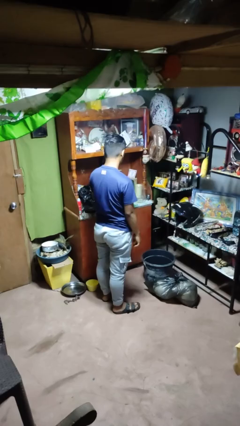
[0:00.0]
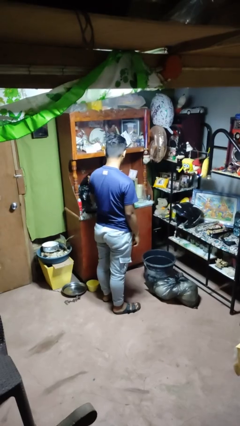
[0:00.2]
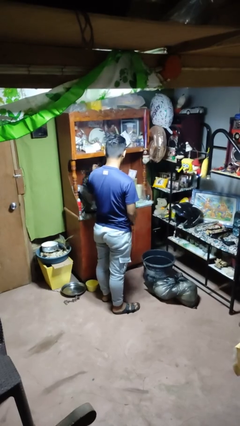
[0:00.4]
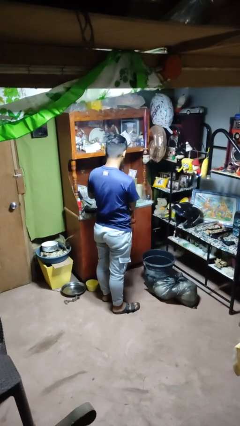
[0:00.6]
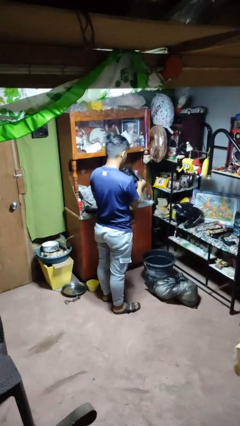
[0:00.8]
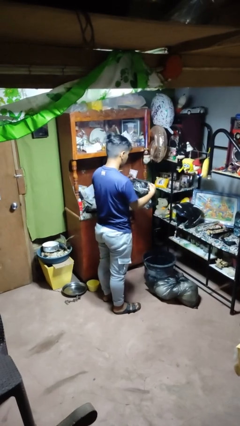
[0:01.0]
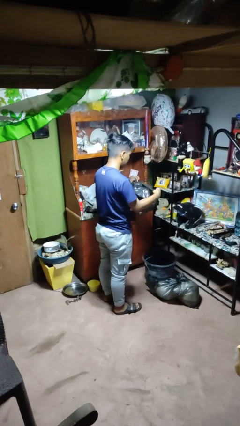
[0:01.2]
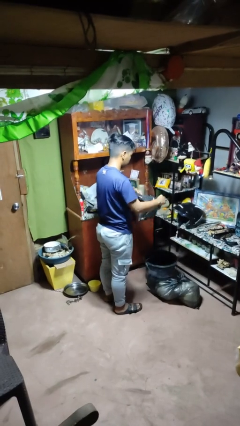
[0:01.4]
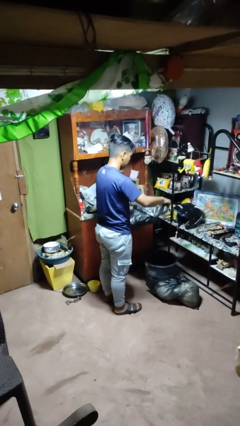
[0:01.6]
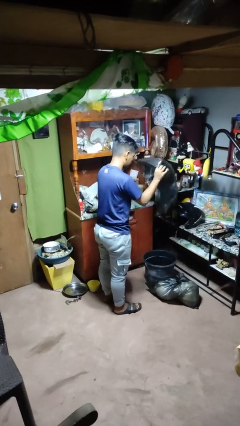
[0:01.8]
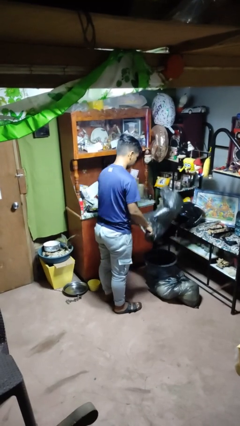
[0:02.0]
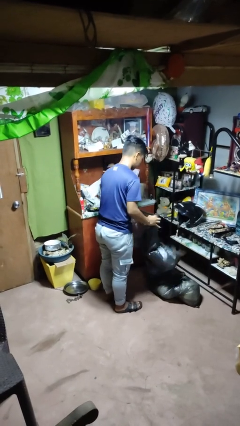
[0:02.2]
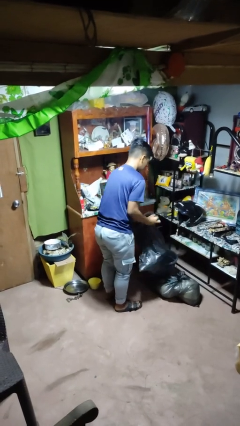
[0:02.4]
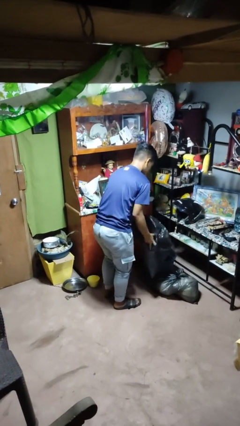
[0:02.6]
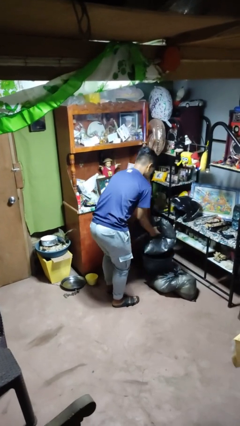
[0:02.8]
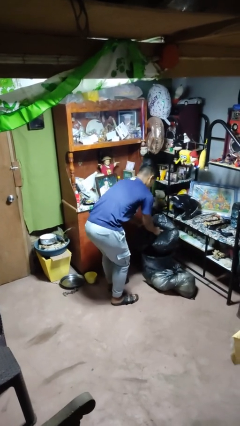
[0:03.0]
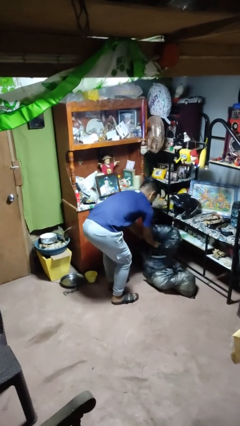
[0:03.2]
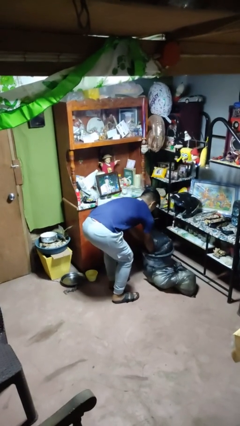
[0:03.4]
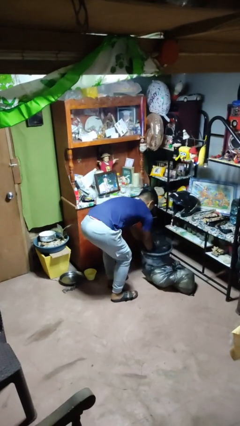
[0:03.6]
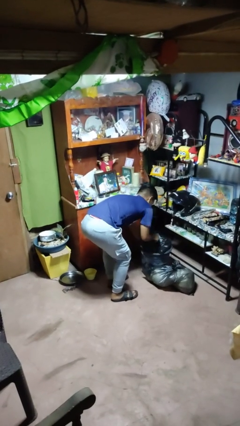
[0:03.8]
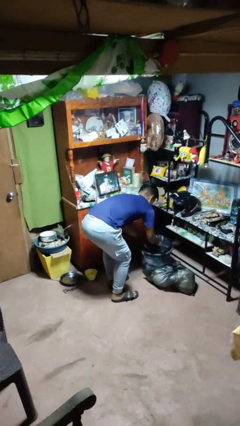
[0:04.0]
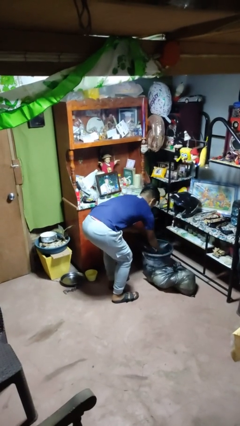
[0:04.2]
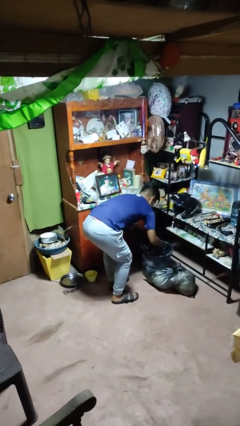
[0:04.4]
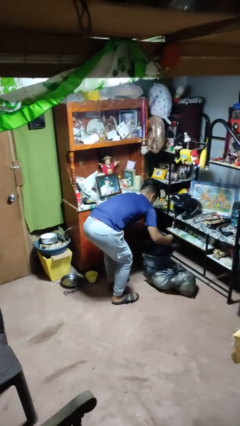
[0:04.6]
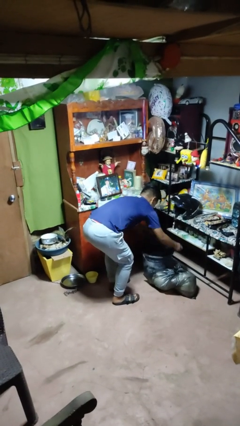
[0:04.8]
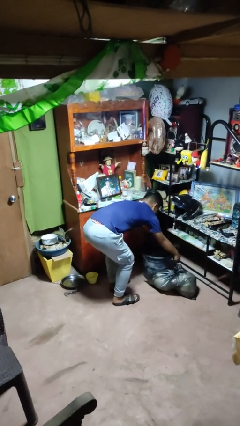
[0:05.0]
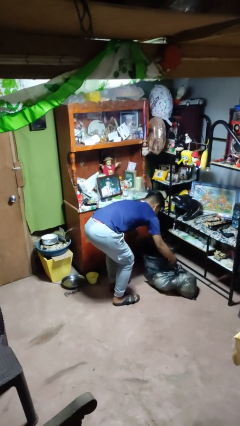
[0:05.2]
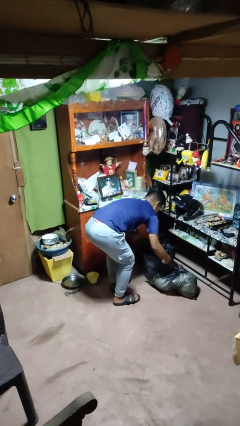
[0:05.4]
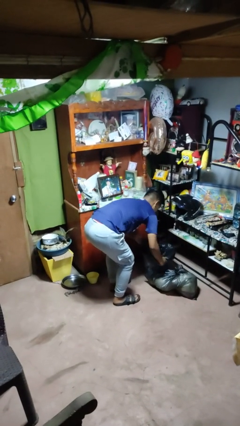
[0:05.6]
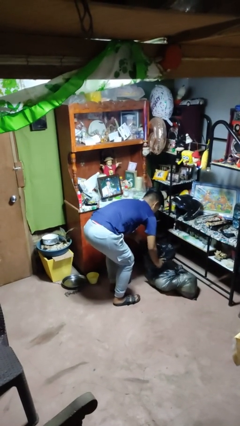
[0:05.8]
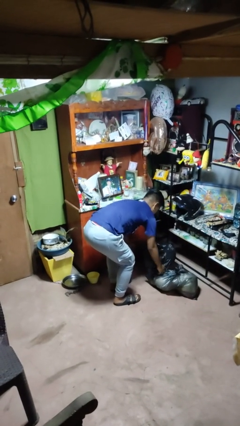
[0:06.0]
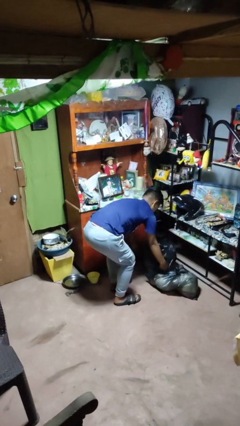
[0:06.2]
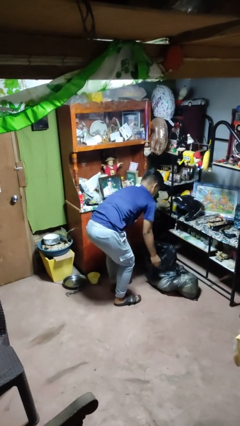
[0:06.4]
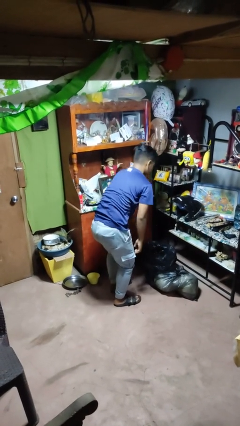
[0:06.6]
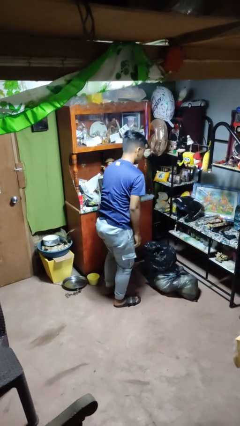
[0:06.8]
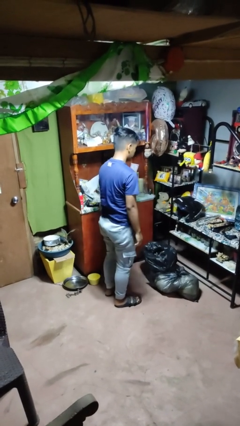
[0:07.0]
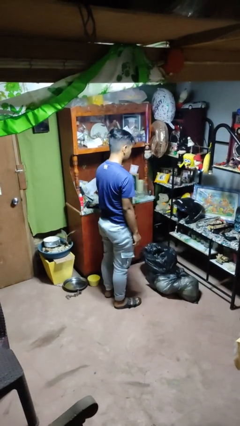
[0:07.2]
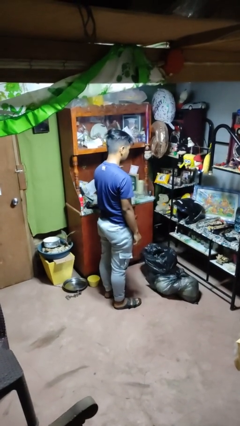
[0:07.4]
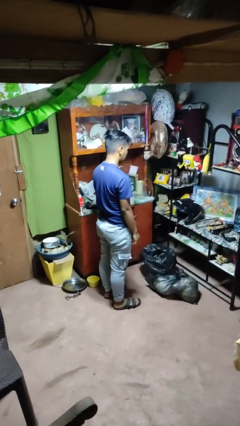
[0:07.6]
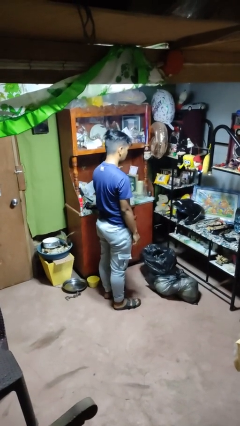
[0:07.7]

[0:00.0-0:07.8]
person inserts trashbag into trashcan

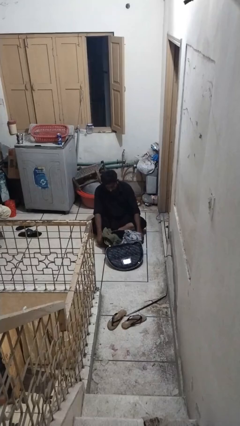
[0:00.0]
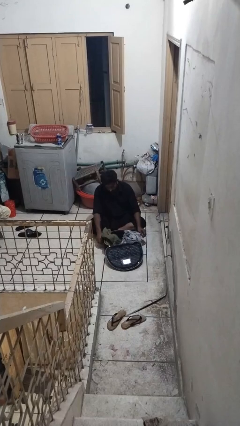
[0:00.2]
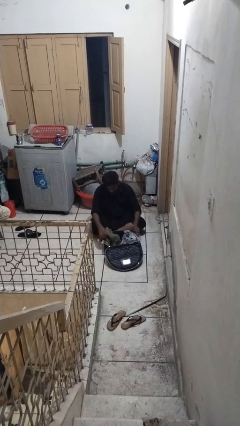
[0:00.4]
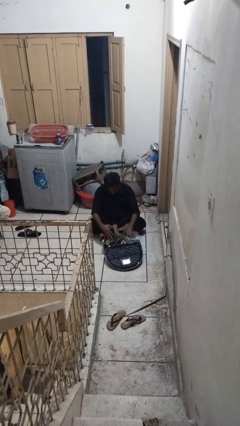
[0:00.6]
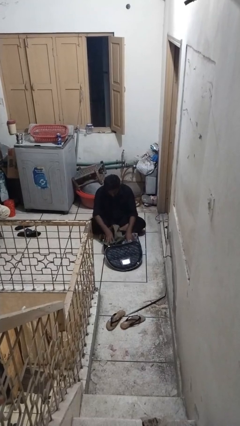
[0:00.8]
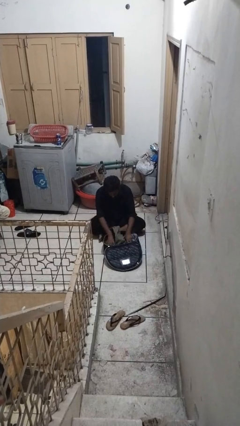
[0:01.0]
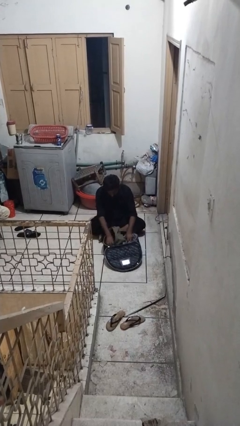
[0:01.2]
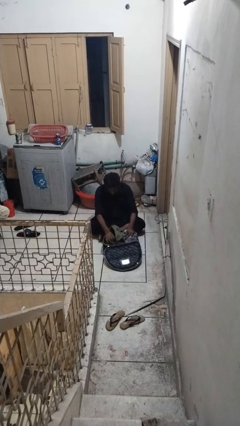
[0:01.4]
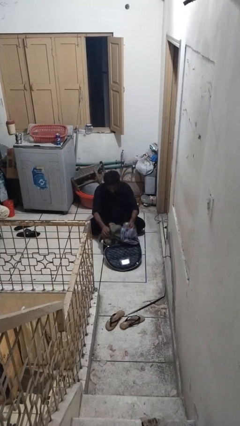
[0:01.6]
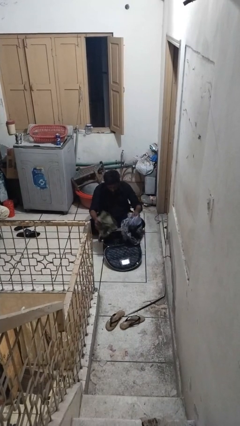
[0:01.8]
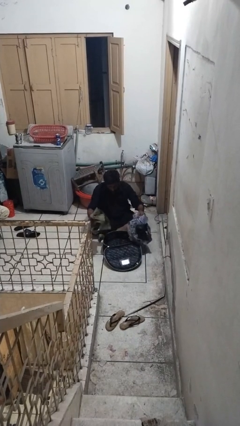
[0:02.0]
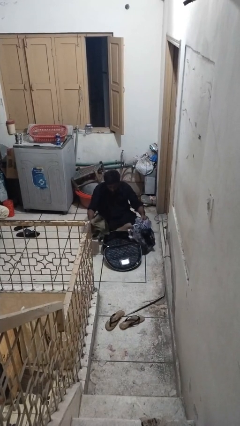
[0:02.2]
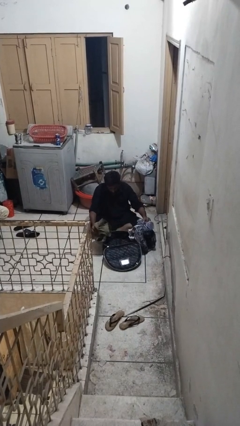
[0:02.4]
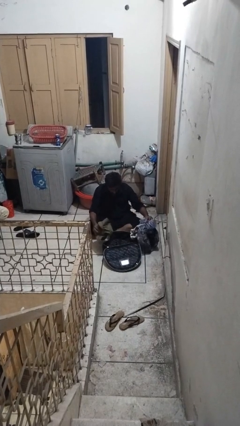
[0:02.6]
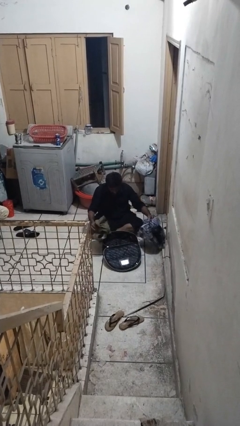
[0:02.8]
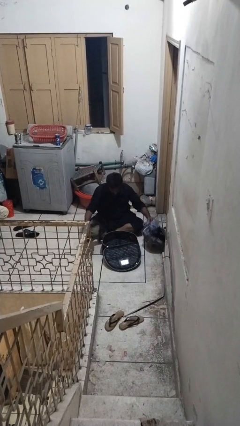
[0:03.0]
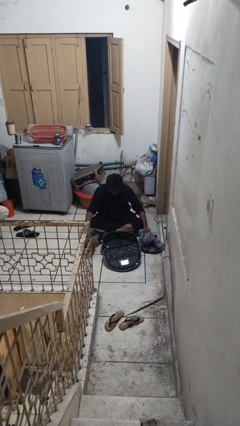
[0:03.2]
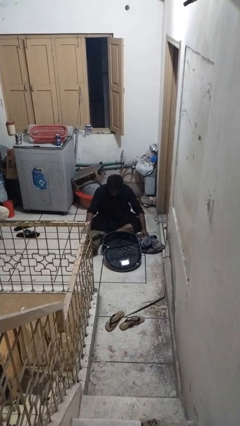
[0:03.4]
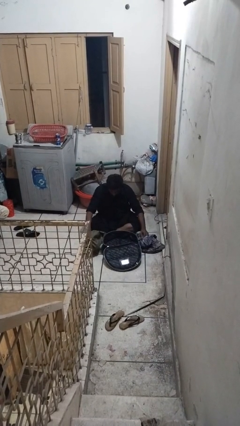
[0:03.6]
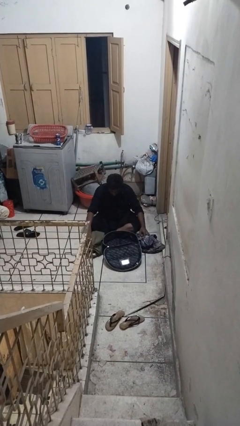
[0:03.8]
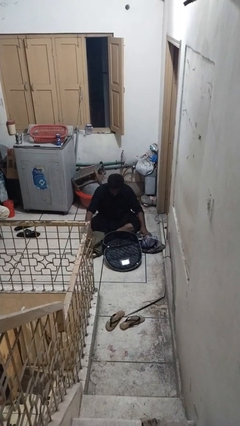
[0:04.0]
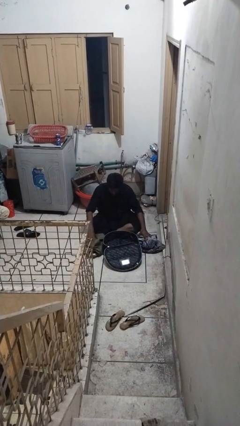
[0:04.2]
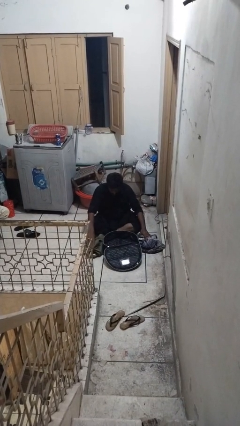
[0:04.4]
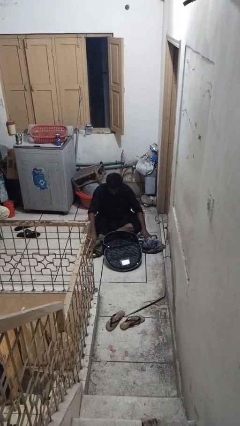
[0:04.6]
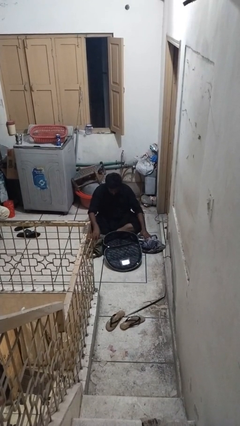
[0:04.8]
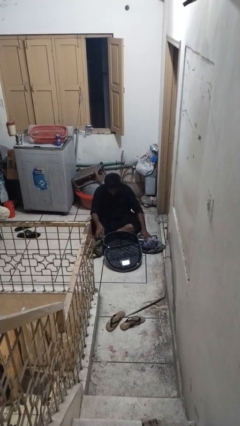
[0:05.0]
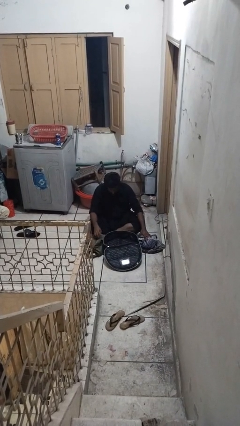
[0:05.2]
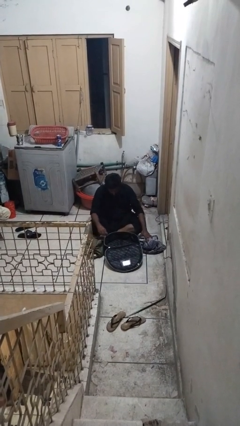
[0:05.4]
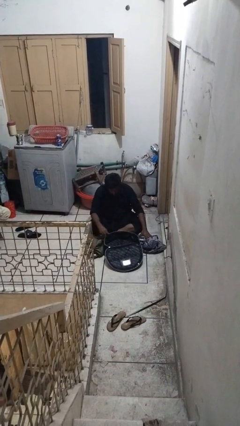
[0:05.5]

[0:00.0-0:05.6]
person unloads clothes from suitcase

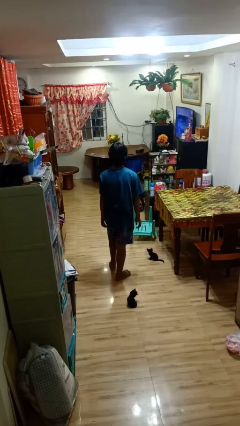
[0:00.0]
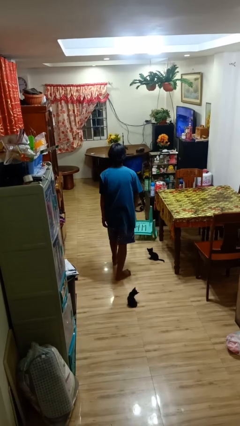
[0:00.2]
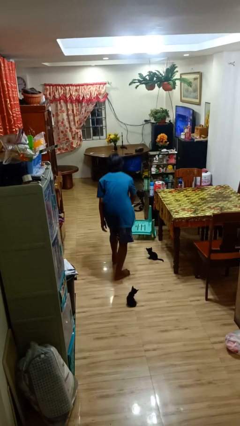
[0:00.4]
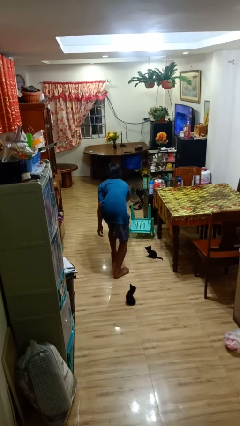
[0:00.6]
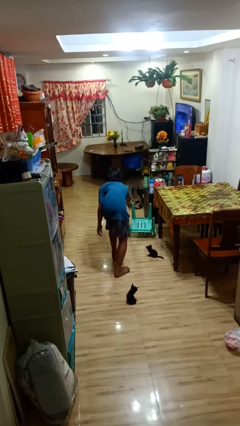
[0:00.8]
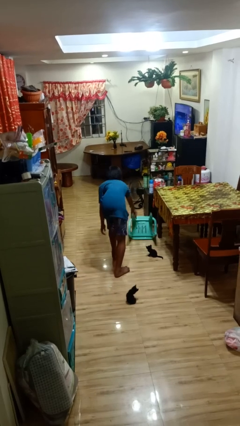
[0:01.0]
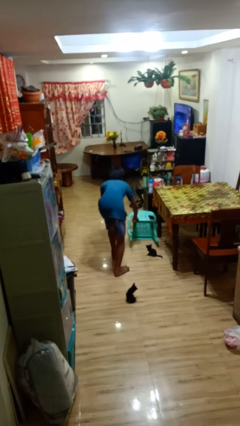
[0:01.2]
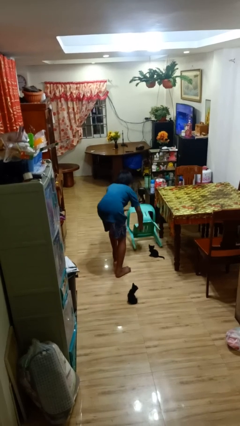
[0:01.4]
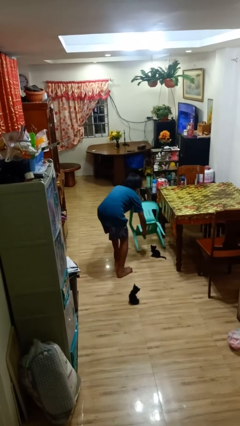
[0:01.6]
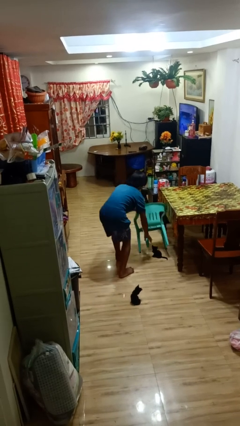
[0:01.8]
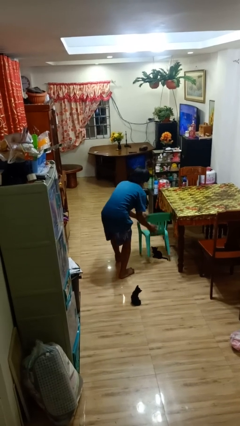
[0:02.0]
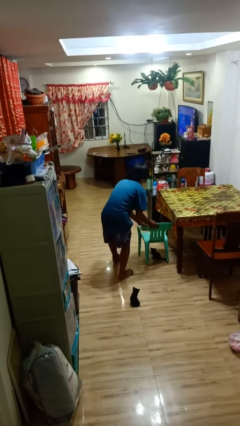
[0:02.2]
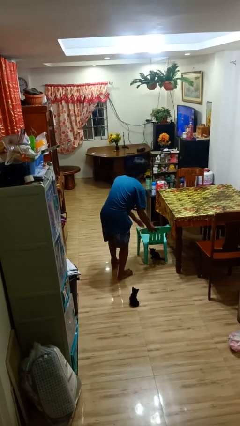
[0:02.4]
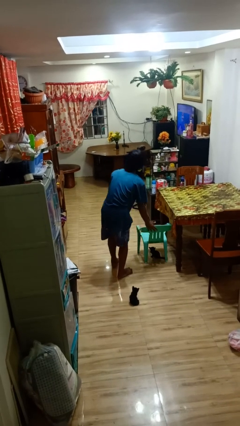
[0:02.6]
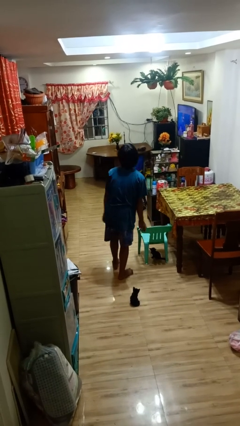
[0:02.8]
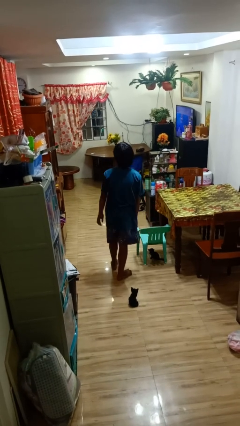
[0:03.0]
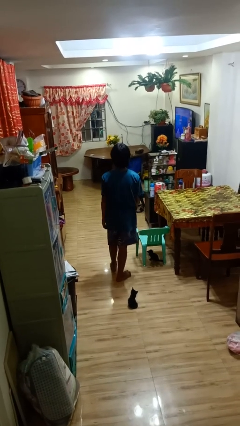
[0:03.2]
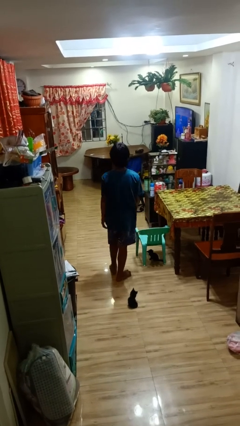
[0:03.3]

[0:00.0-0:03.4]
person sets upright furniture

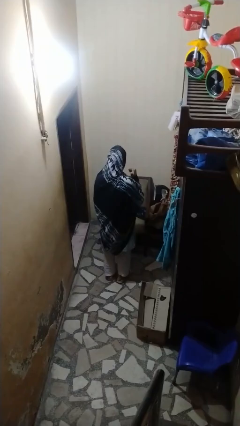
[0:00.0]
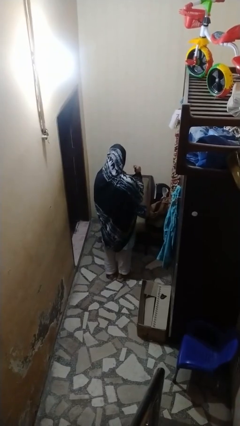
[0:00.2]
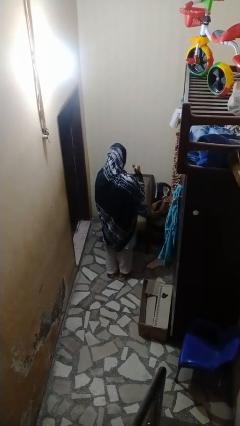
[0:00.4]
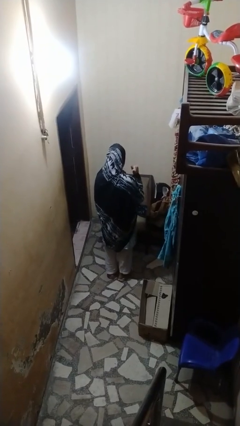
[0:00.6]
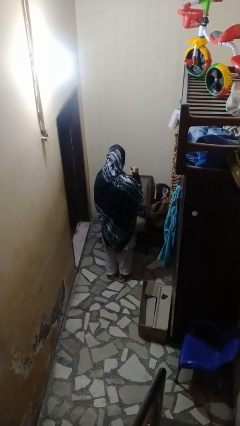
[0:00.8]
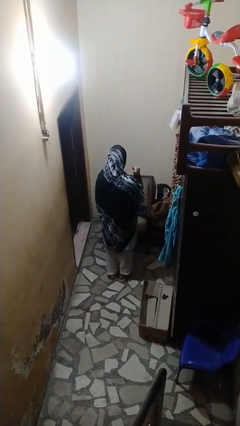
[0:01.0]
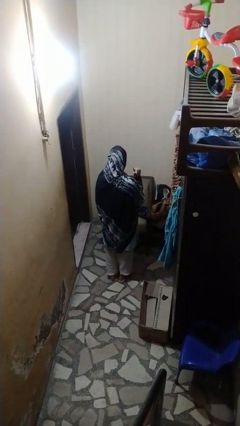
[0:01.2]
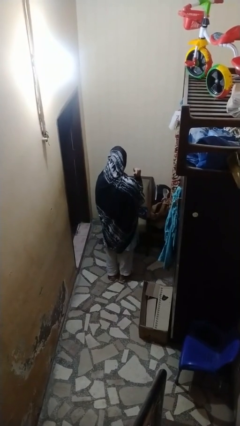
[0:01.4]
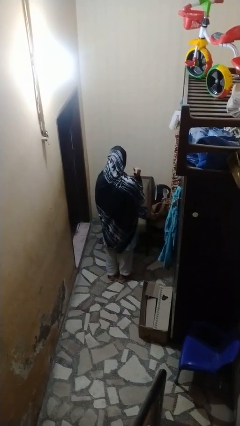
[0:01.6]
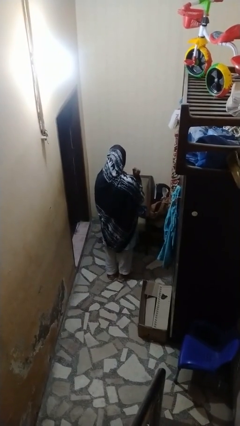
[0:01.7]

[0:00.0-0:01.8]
person gestures behind me
